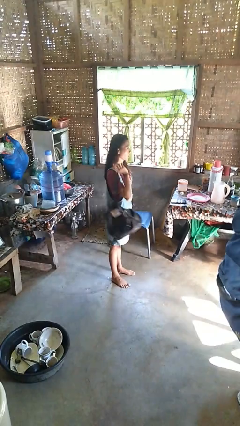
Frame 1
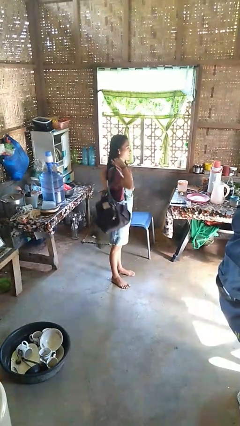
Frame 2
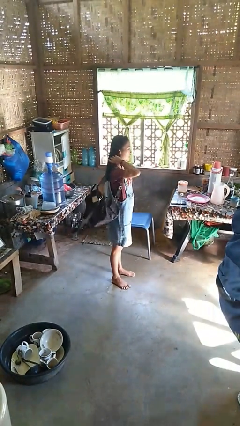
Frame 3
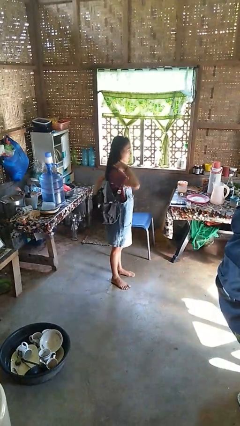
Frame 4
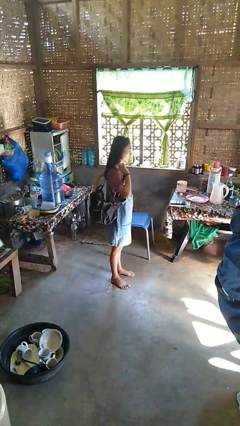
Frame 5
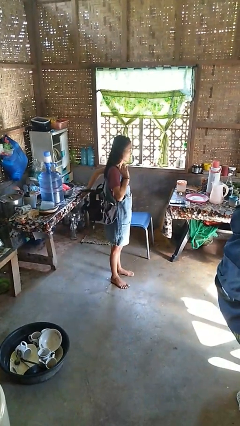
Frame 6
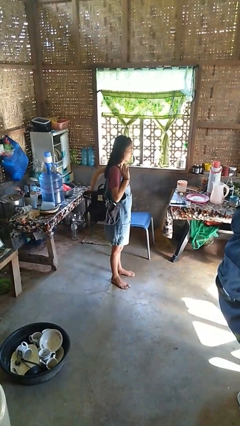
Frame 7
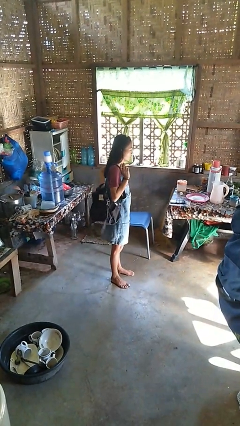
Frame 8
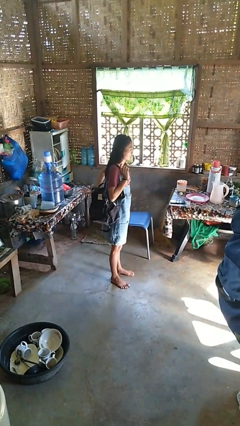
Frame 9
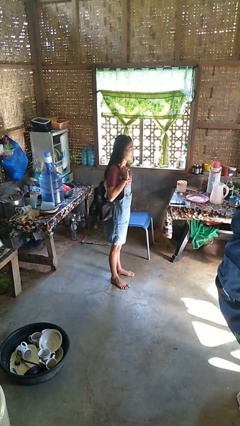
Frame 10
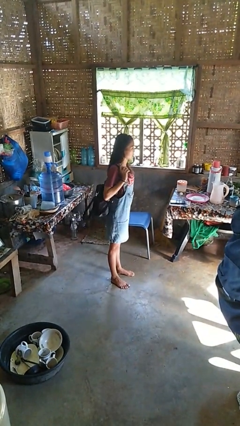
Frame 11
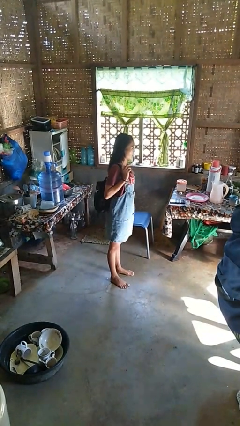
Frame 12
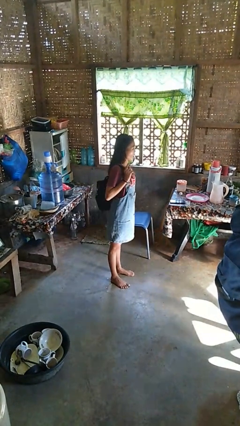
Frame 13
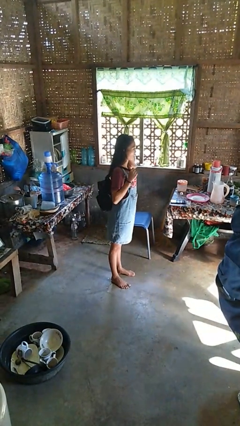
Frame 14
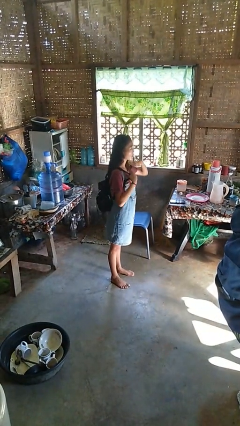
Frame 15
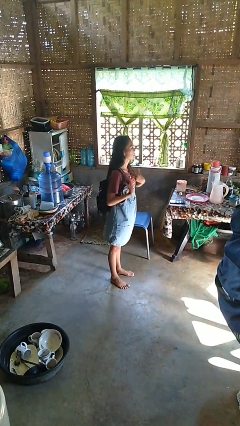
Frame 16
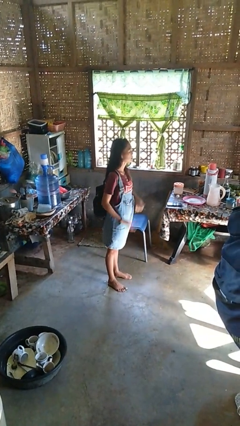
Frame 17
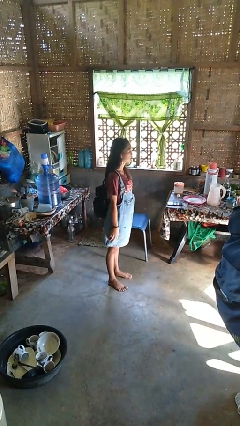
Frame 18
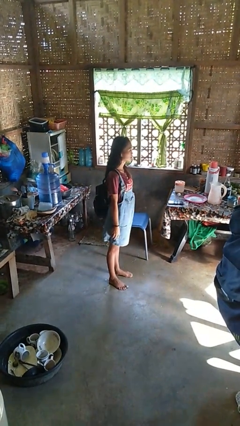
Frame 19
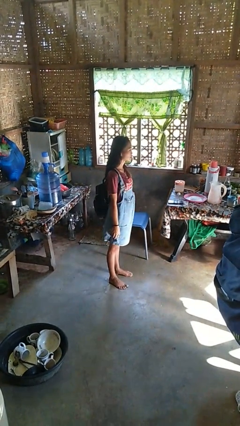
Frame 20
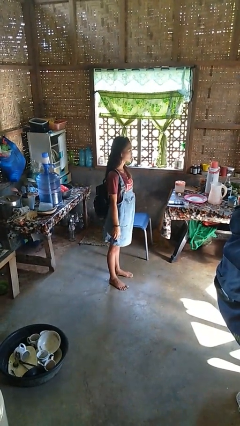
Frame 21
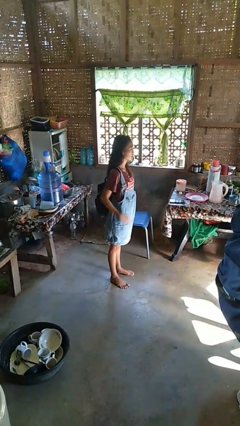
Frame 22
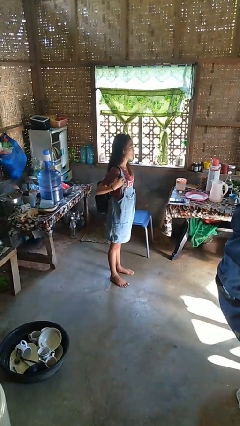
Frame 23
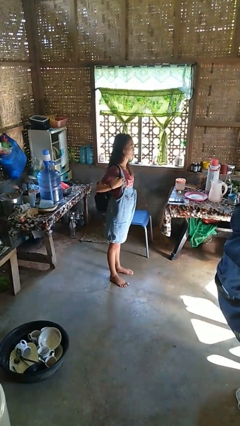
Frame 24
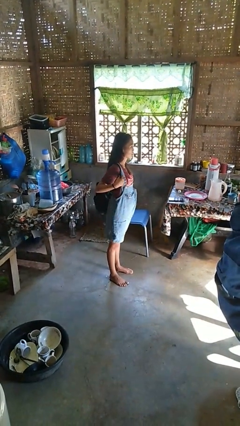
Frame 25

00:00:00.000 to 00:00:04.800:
person puts on backpack

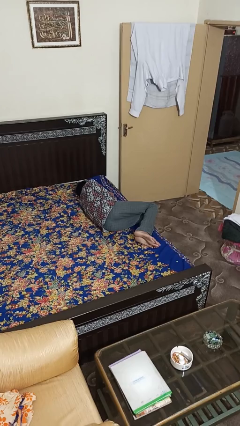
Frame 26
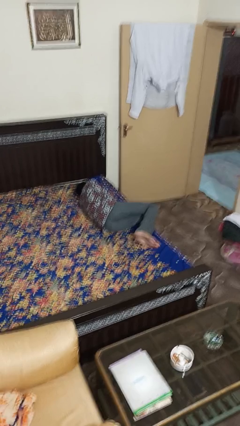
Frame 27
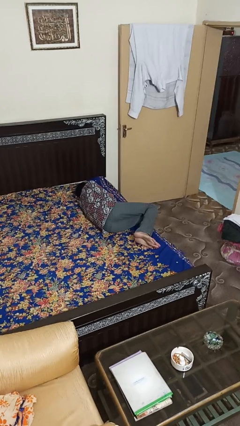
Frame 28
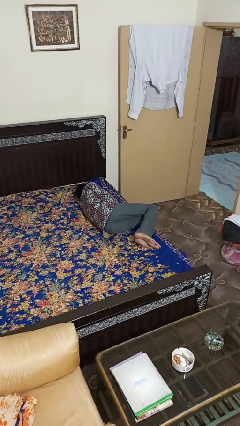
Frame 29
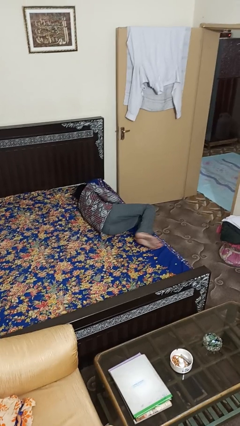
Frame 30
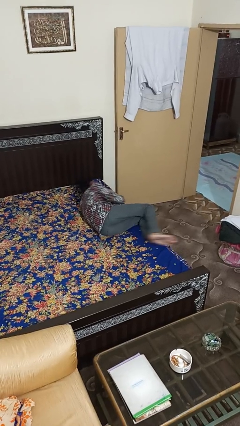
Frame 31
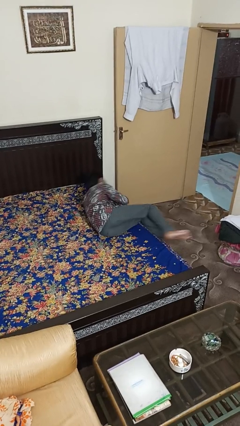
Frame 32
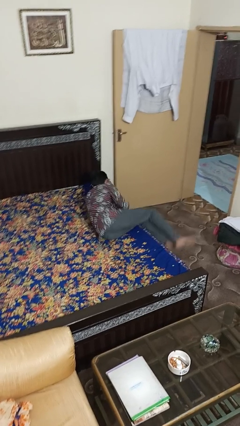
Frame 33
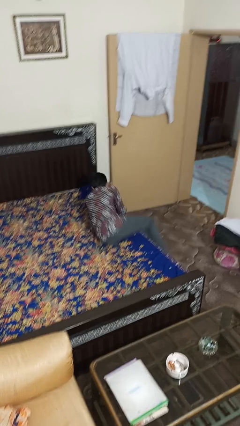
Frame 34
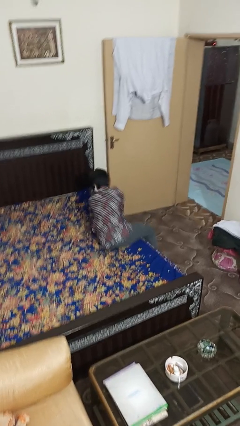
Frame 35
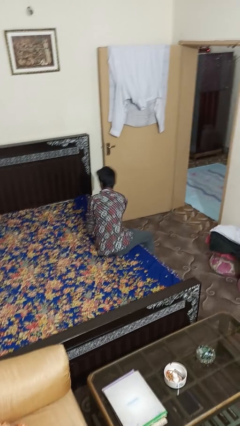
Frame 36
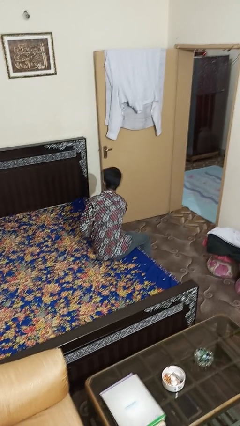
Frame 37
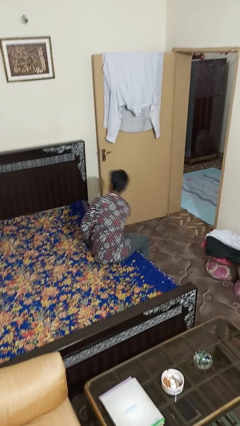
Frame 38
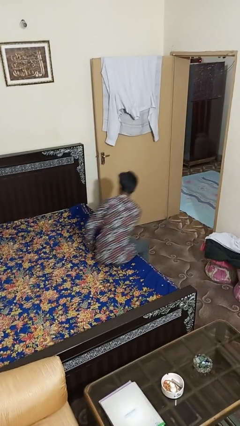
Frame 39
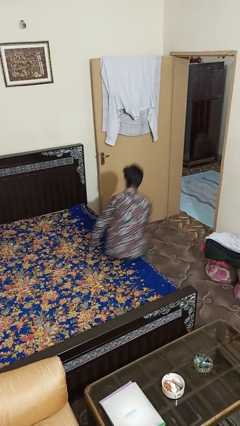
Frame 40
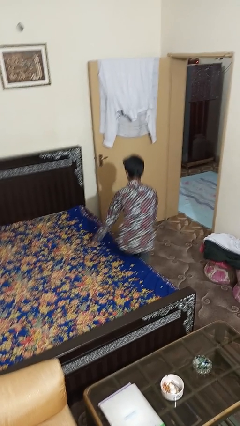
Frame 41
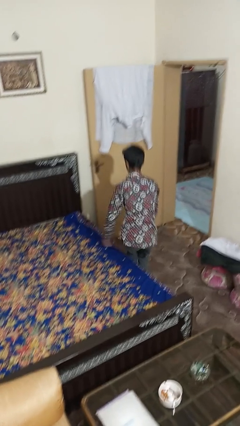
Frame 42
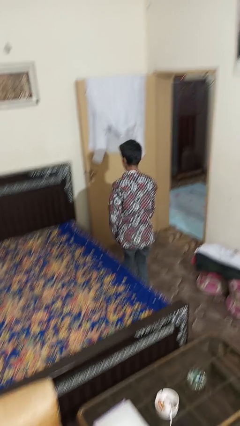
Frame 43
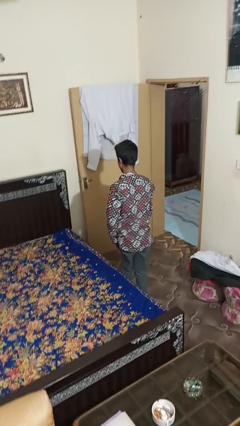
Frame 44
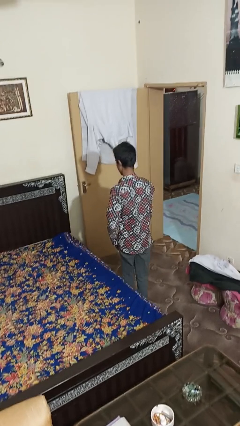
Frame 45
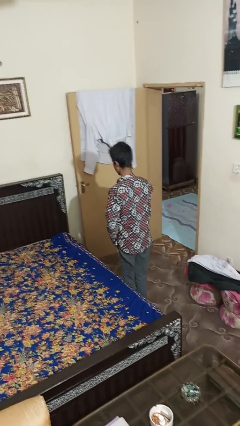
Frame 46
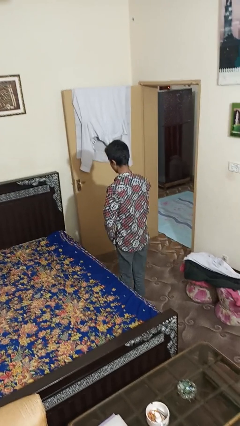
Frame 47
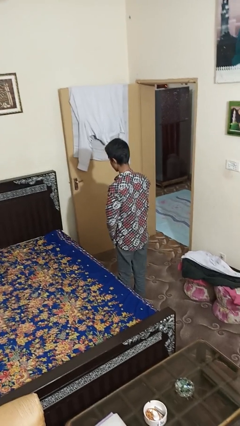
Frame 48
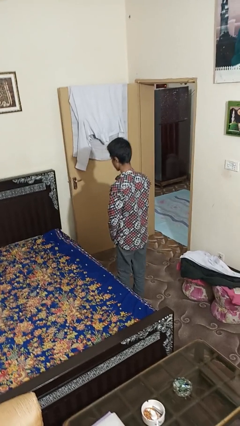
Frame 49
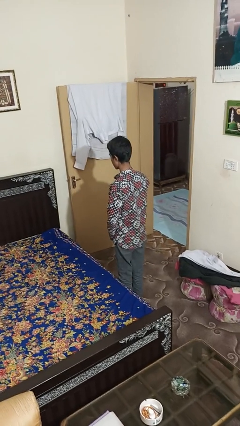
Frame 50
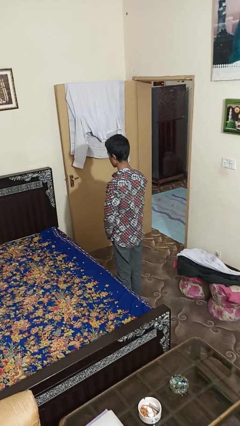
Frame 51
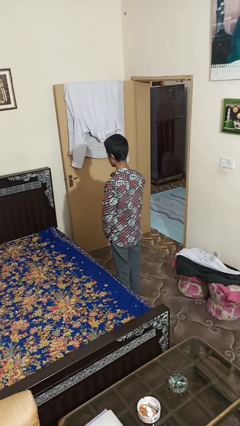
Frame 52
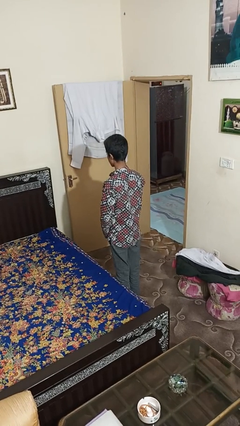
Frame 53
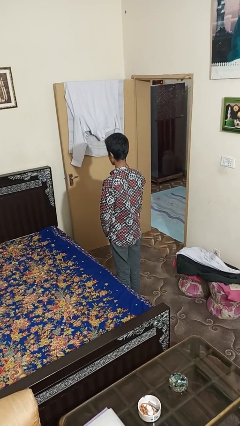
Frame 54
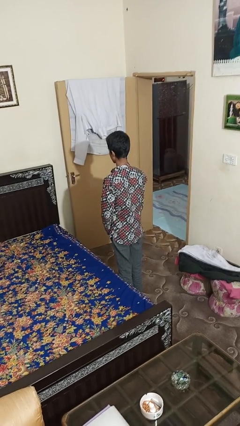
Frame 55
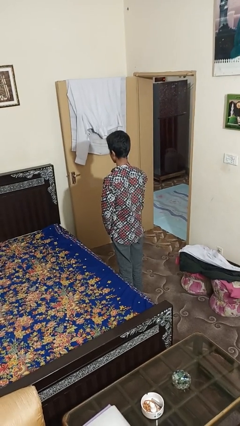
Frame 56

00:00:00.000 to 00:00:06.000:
person stands up

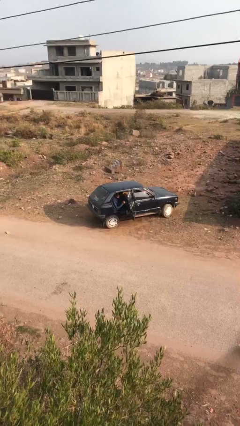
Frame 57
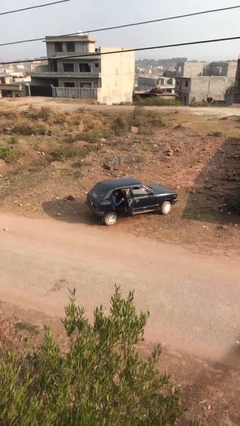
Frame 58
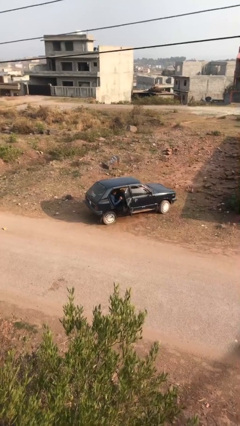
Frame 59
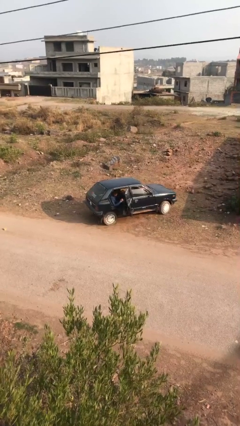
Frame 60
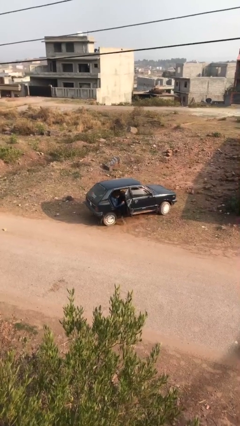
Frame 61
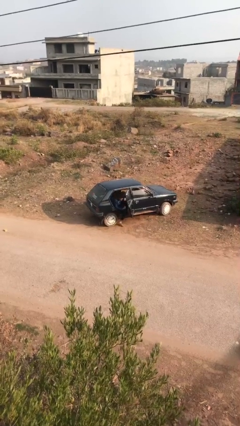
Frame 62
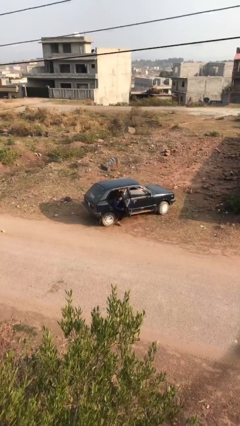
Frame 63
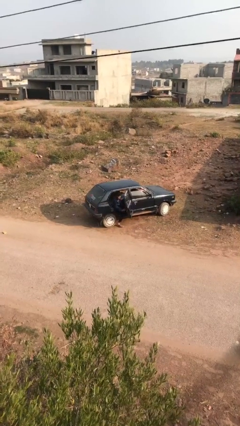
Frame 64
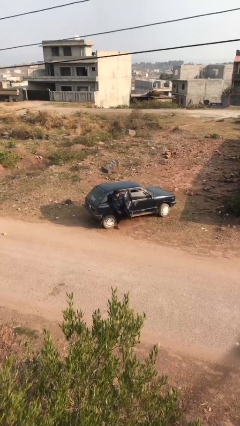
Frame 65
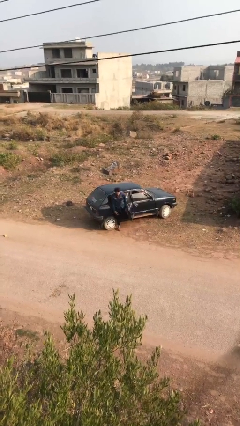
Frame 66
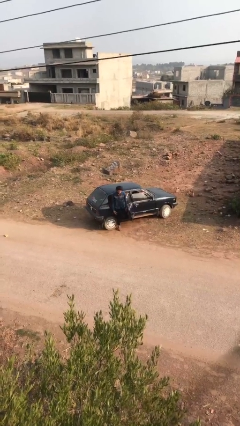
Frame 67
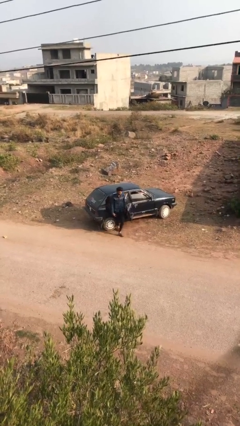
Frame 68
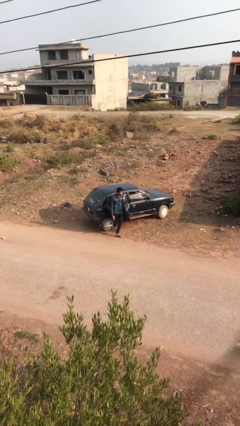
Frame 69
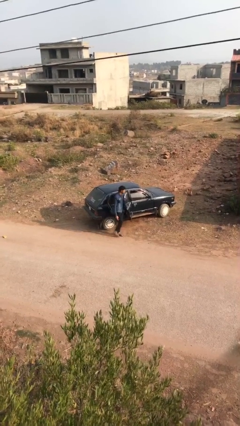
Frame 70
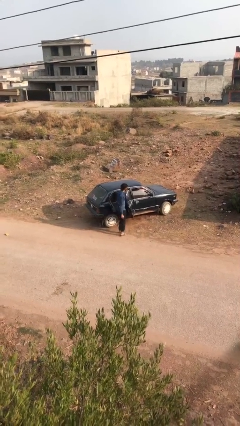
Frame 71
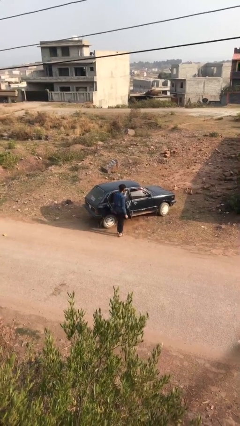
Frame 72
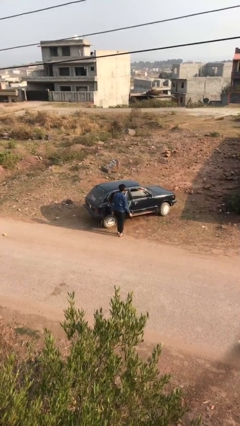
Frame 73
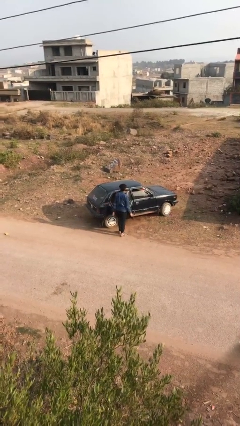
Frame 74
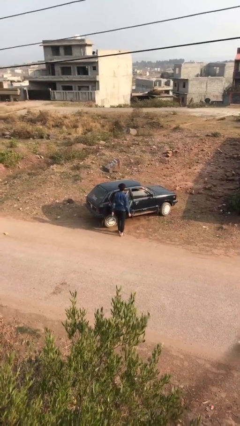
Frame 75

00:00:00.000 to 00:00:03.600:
person exits car

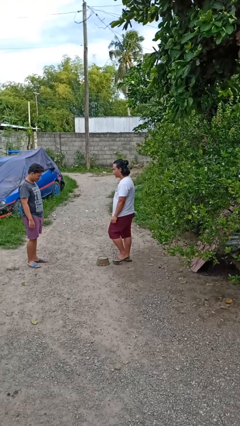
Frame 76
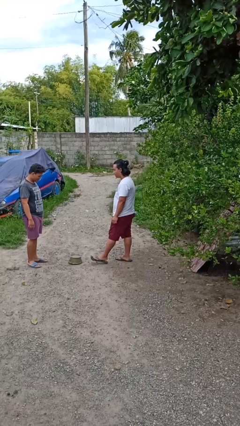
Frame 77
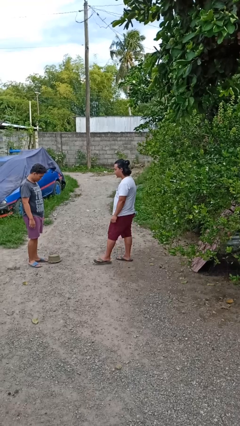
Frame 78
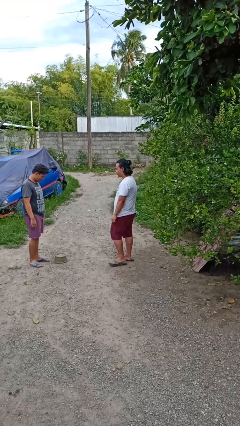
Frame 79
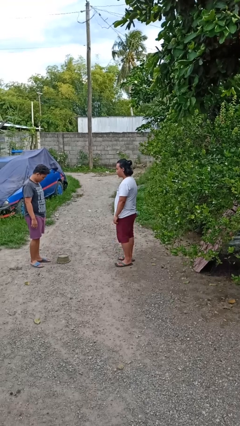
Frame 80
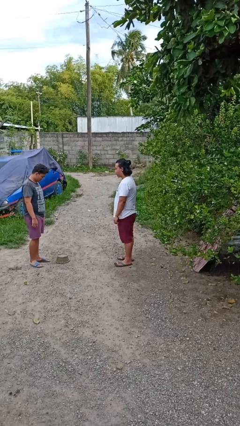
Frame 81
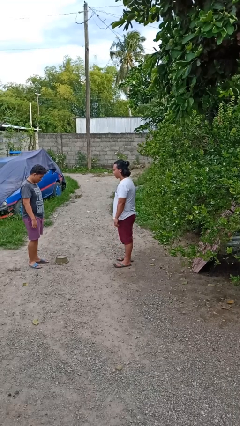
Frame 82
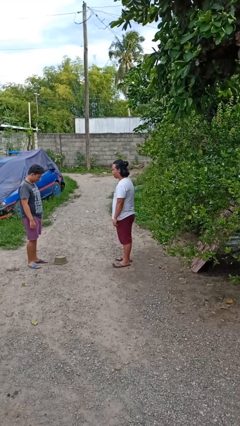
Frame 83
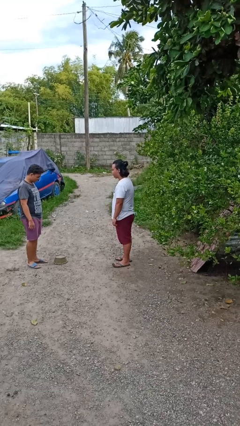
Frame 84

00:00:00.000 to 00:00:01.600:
person kicks object to person

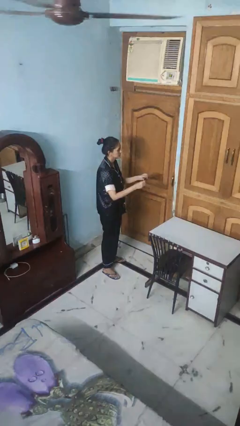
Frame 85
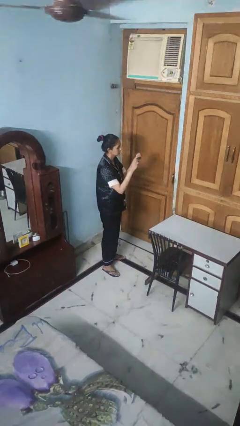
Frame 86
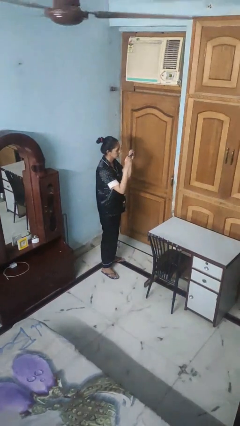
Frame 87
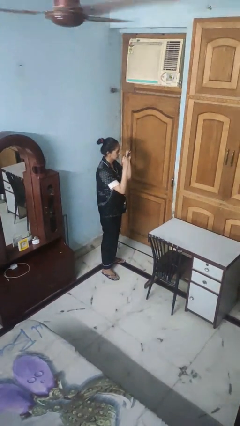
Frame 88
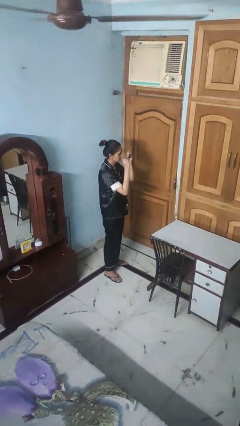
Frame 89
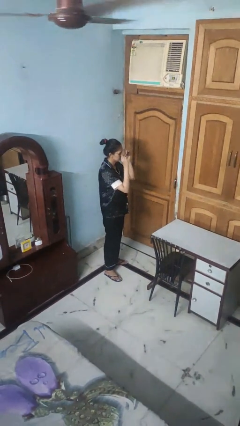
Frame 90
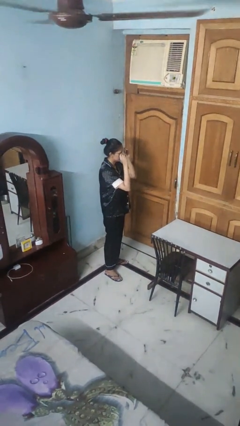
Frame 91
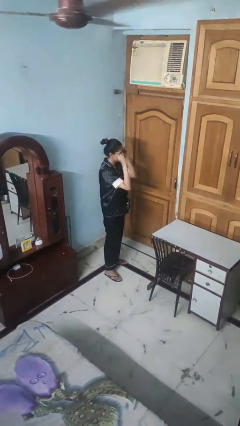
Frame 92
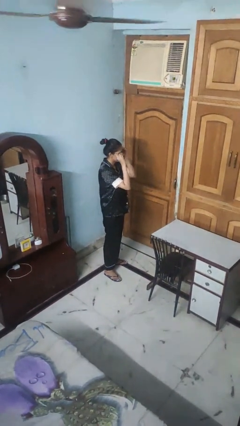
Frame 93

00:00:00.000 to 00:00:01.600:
person puts on sunglasses
